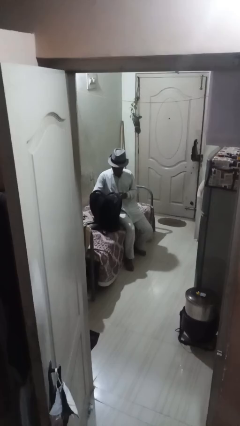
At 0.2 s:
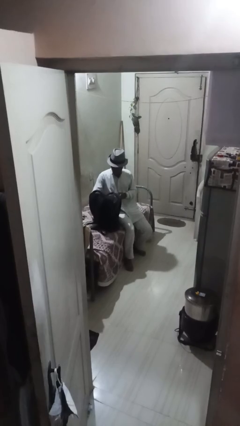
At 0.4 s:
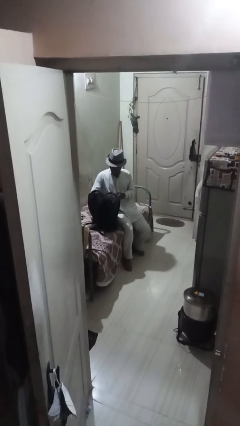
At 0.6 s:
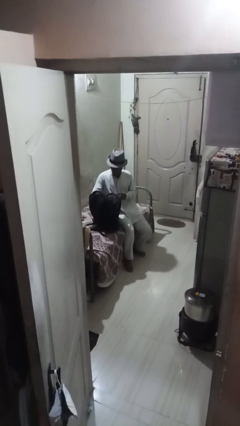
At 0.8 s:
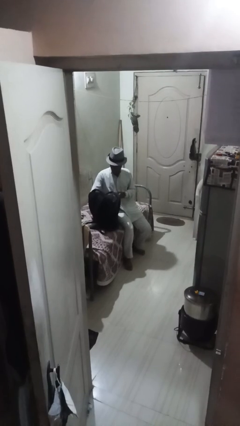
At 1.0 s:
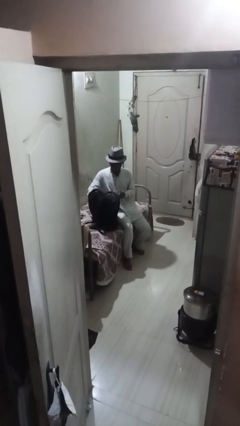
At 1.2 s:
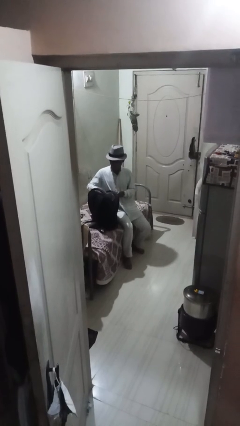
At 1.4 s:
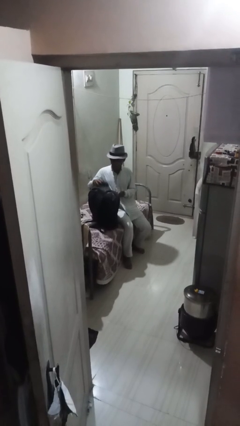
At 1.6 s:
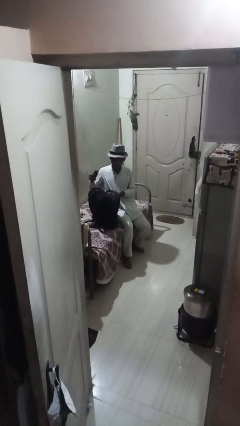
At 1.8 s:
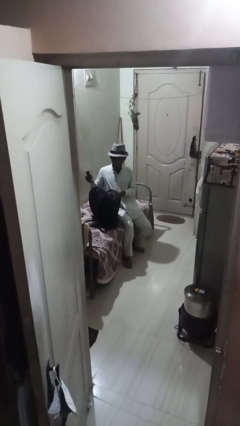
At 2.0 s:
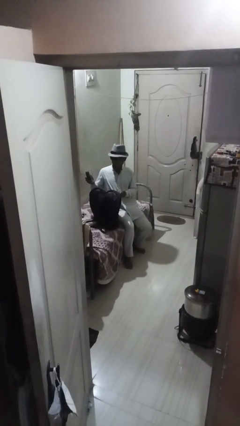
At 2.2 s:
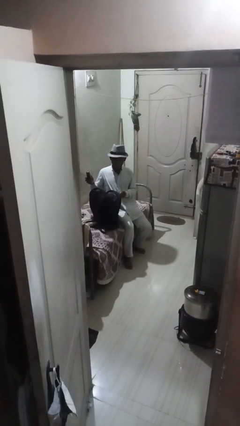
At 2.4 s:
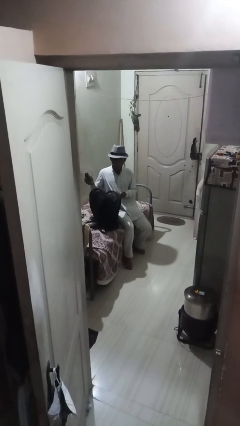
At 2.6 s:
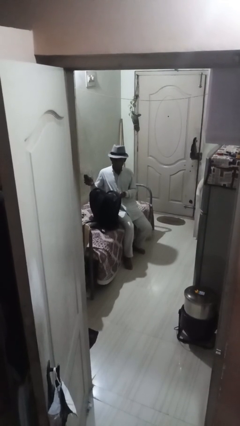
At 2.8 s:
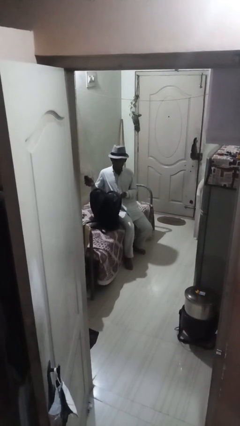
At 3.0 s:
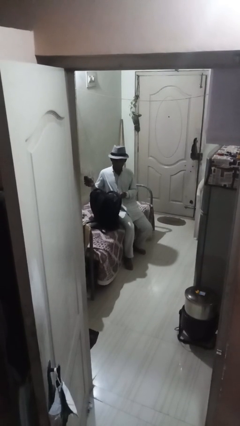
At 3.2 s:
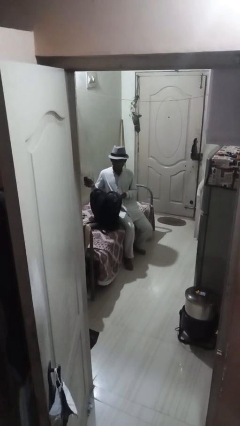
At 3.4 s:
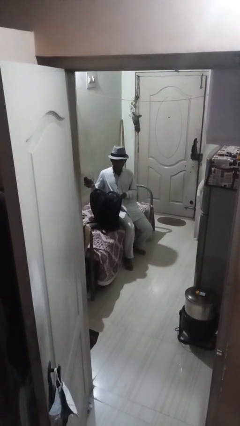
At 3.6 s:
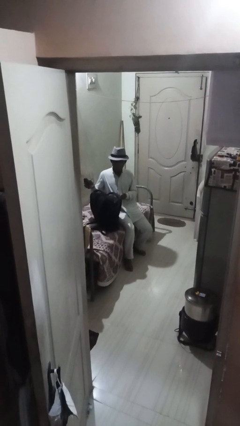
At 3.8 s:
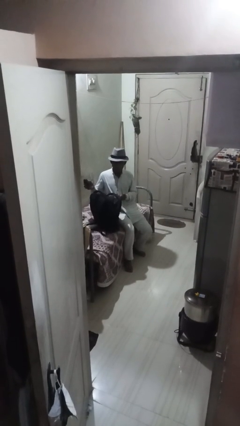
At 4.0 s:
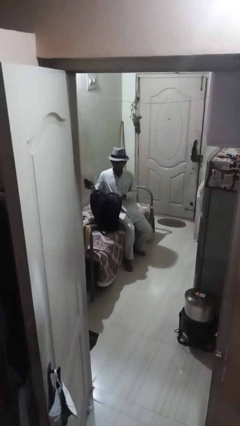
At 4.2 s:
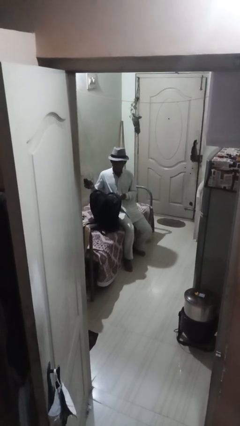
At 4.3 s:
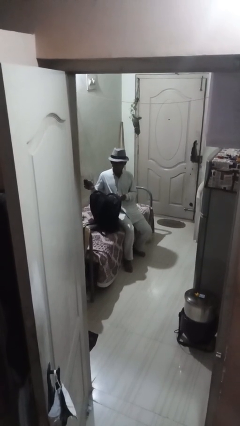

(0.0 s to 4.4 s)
person takes object from backpack

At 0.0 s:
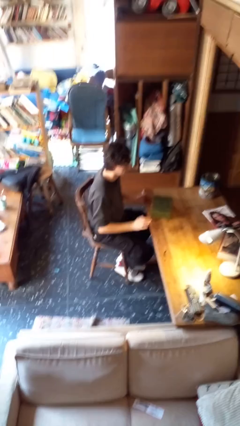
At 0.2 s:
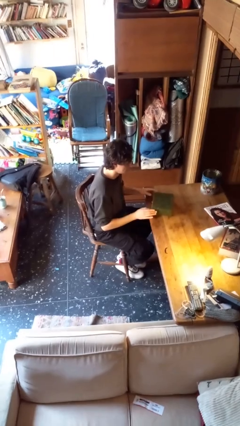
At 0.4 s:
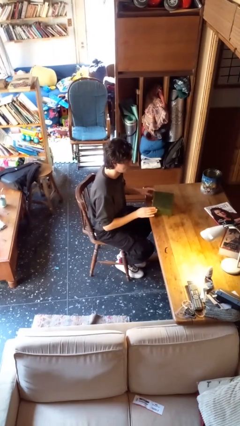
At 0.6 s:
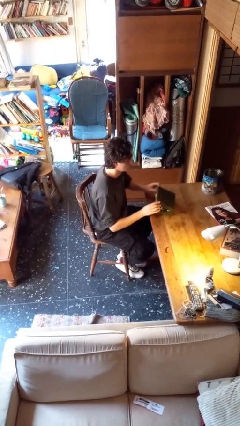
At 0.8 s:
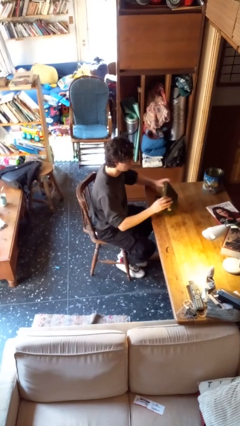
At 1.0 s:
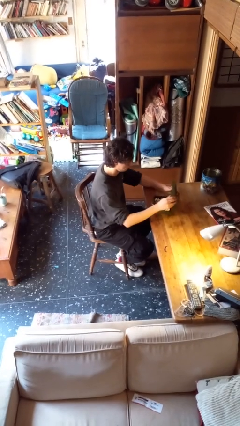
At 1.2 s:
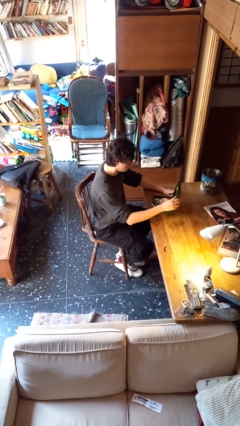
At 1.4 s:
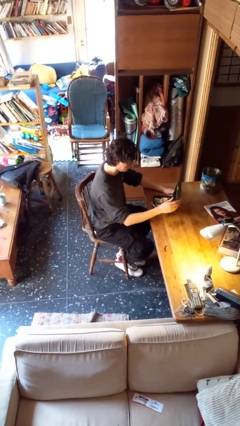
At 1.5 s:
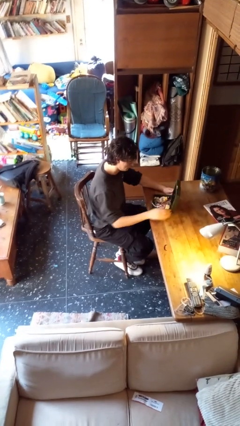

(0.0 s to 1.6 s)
person opens jewelry box

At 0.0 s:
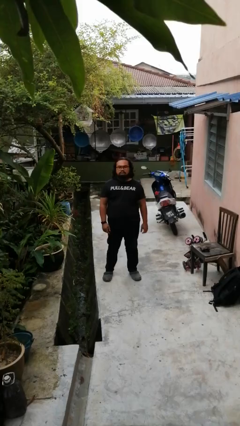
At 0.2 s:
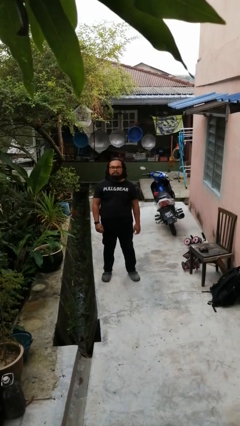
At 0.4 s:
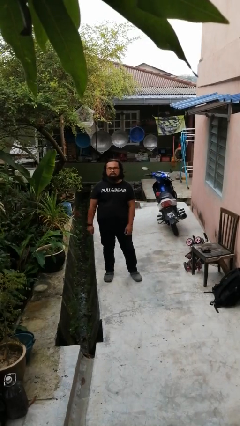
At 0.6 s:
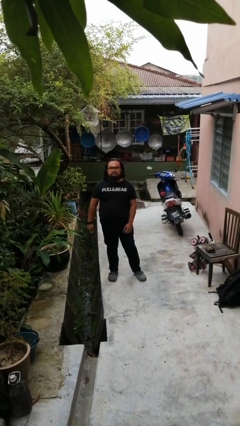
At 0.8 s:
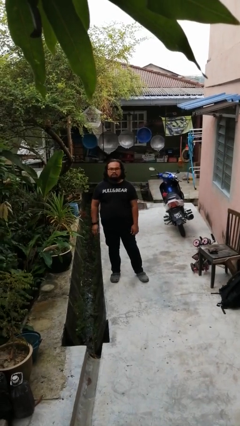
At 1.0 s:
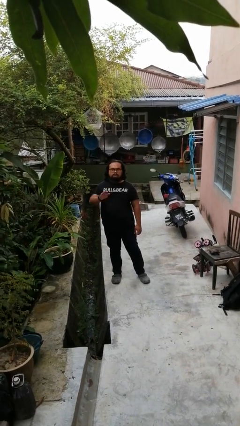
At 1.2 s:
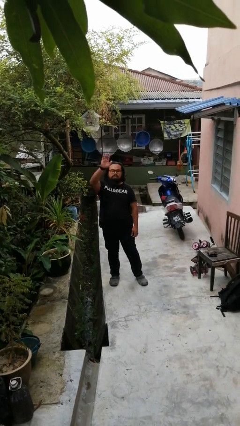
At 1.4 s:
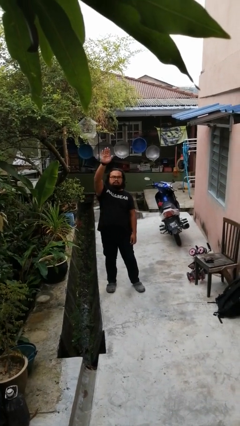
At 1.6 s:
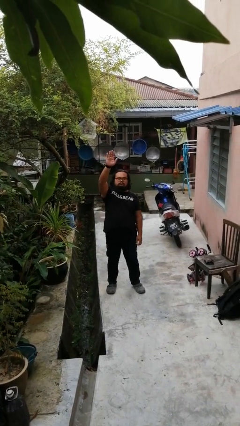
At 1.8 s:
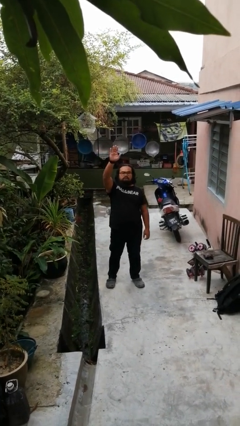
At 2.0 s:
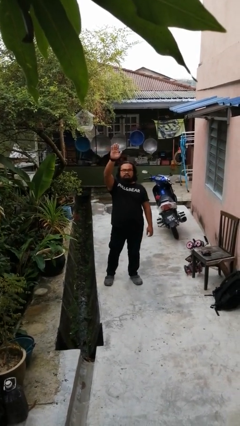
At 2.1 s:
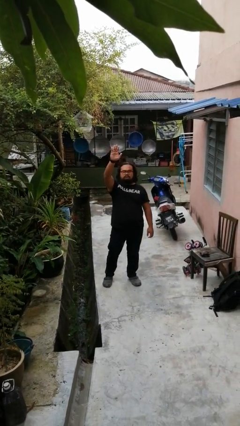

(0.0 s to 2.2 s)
person gestures raise hand

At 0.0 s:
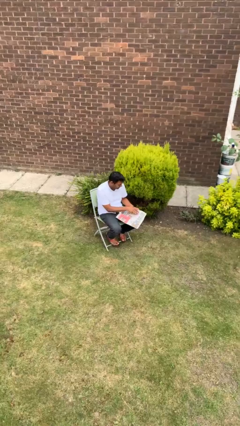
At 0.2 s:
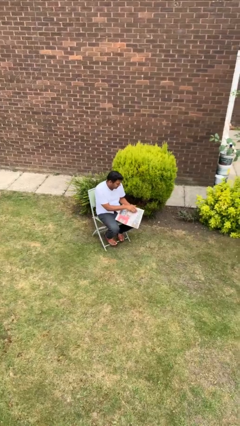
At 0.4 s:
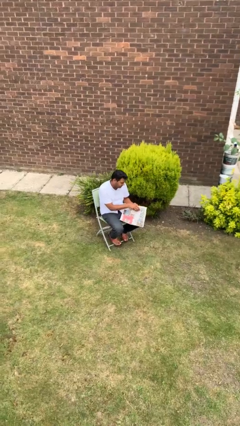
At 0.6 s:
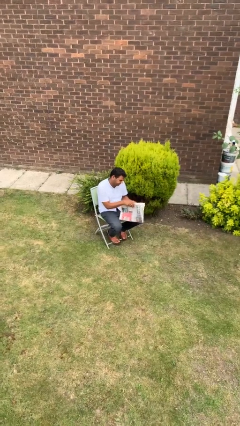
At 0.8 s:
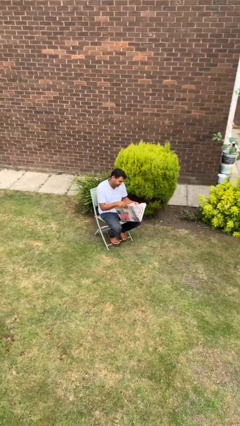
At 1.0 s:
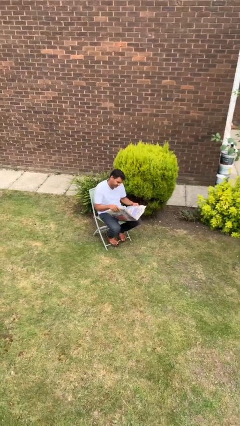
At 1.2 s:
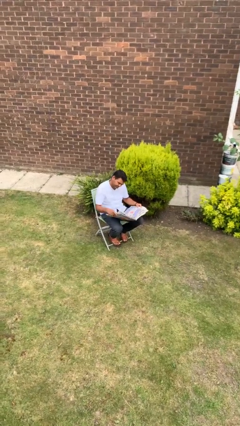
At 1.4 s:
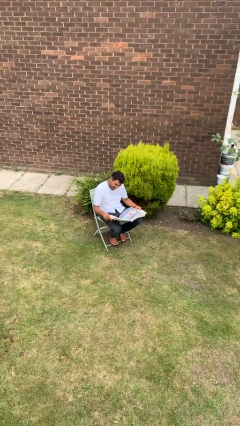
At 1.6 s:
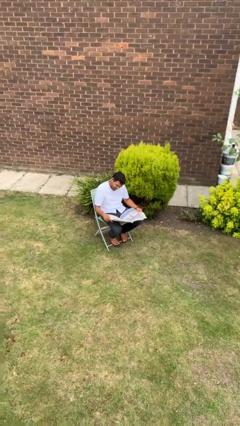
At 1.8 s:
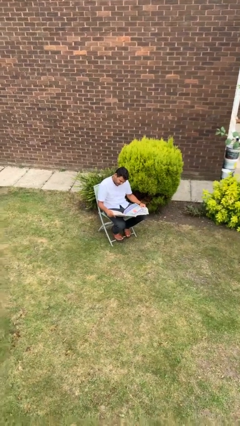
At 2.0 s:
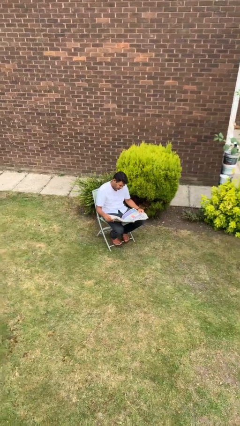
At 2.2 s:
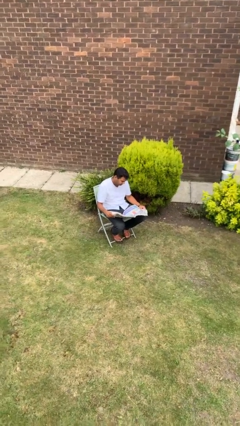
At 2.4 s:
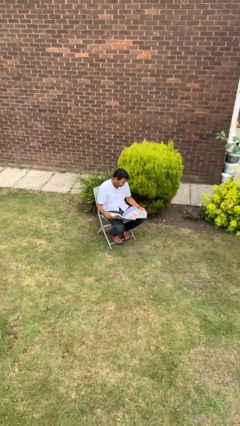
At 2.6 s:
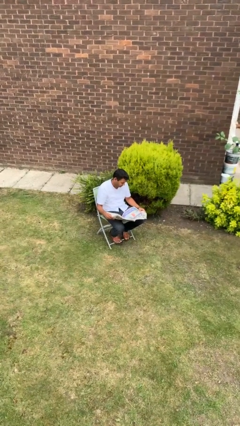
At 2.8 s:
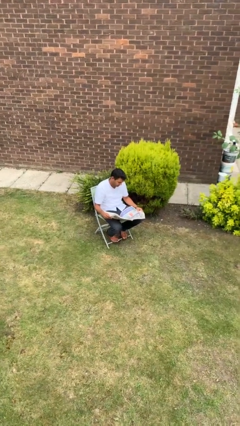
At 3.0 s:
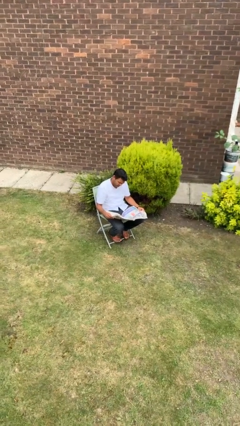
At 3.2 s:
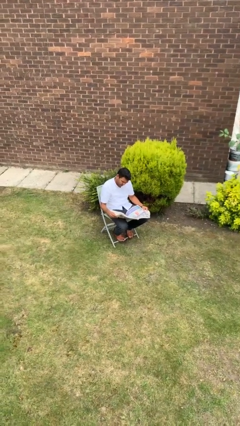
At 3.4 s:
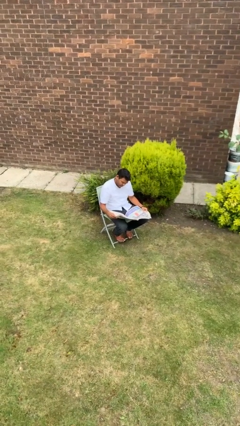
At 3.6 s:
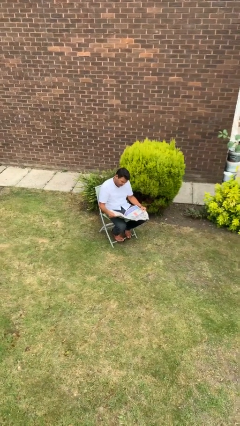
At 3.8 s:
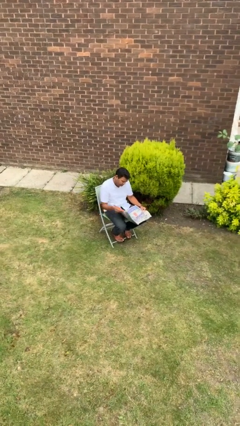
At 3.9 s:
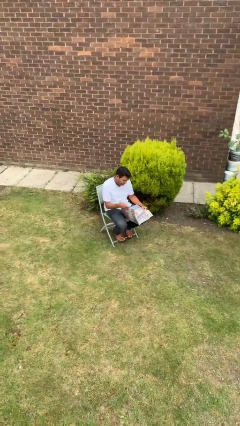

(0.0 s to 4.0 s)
person reads newspaper

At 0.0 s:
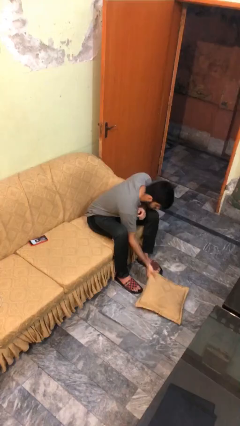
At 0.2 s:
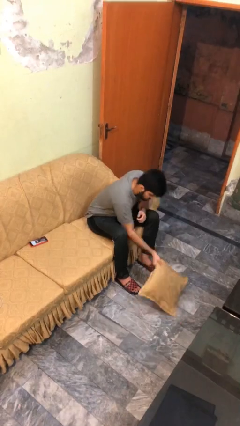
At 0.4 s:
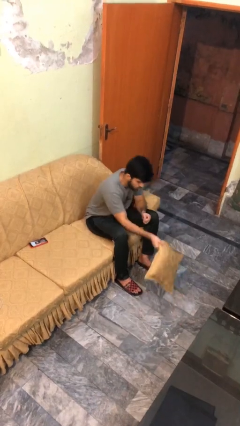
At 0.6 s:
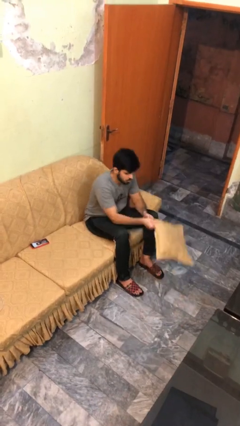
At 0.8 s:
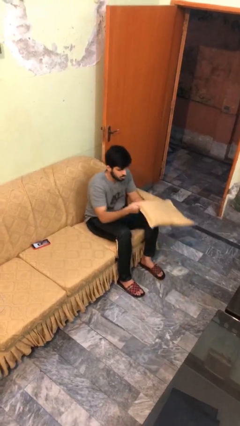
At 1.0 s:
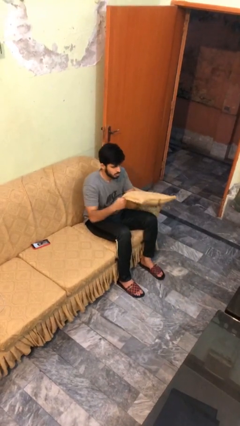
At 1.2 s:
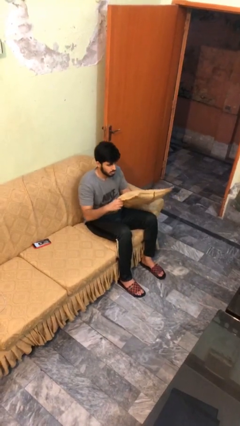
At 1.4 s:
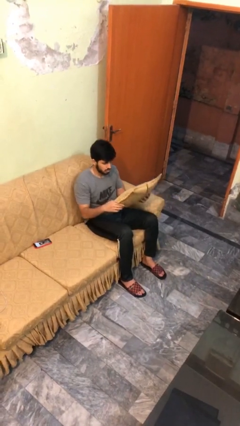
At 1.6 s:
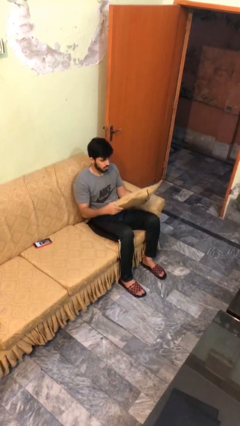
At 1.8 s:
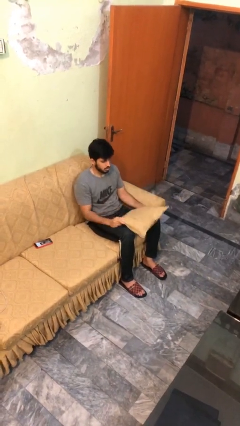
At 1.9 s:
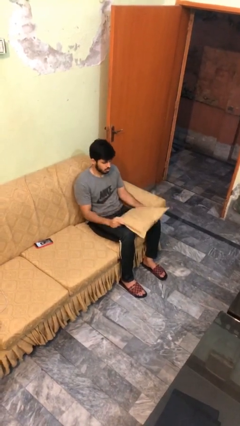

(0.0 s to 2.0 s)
person picks up object from floor

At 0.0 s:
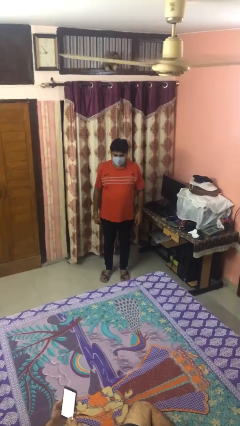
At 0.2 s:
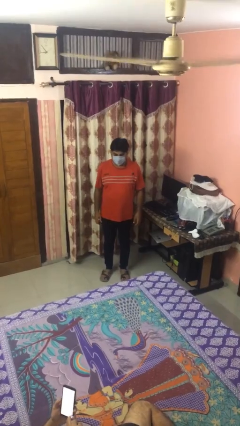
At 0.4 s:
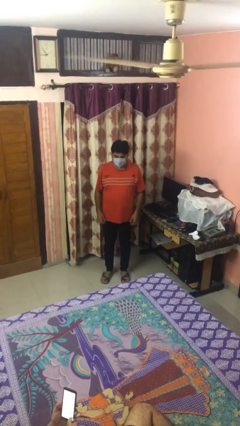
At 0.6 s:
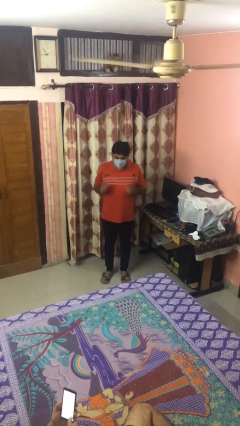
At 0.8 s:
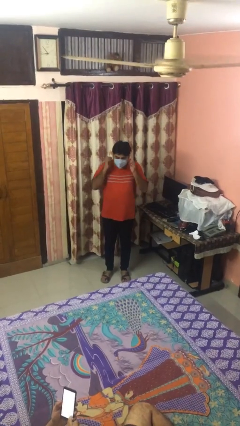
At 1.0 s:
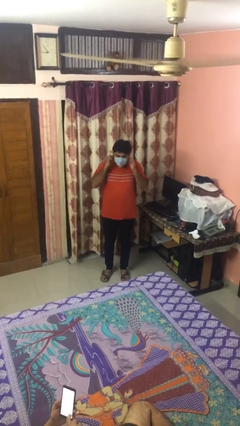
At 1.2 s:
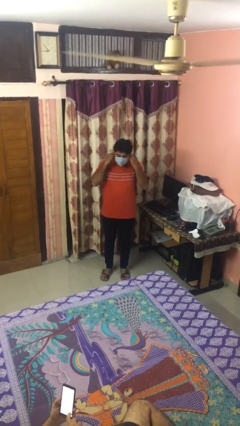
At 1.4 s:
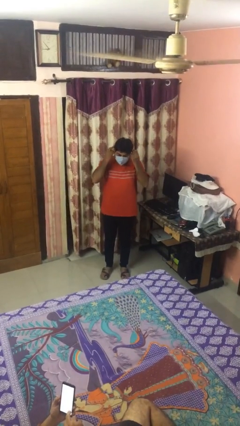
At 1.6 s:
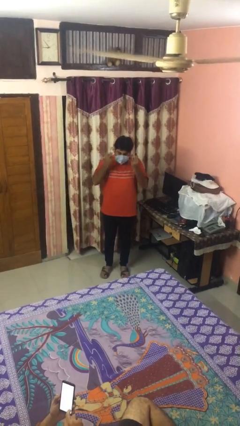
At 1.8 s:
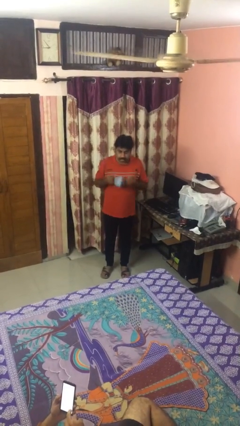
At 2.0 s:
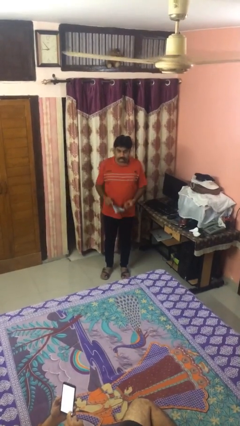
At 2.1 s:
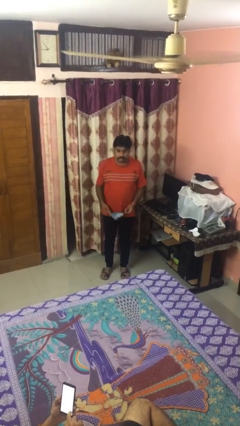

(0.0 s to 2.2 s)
person takes off facemask

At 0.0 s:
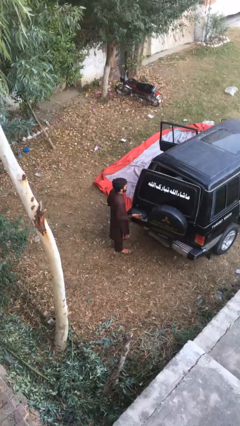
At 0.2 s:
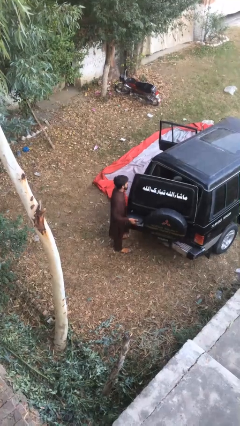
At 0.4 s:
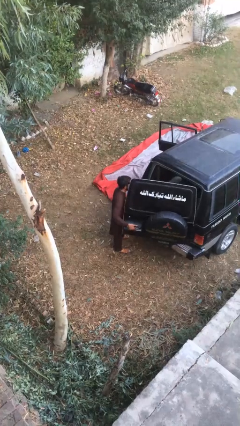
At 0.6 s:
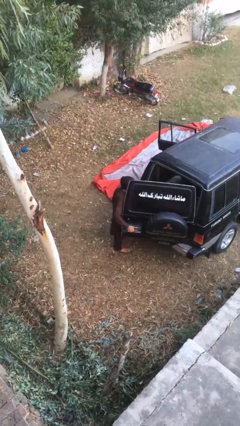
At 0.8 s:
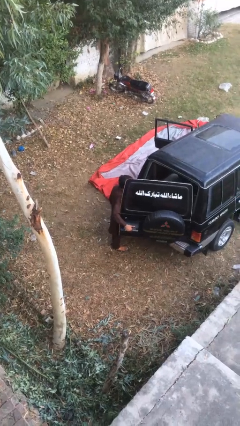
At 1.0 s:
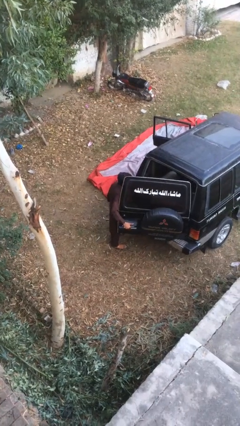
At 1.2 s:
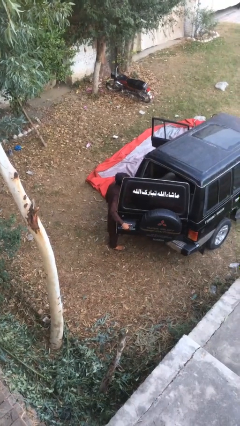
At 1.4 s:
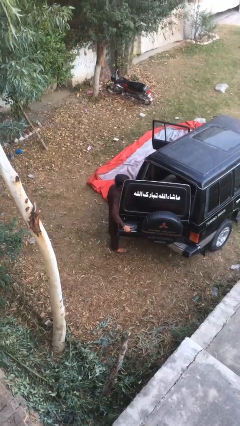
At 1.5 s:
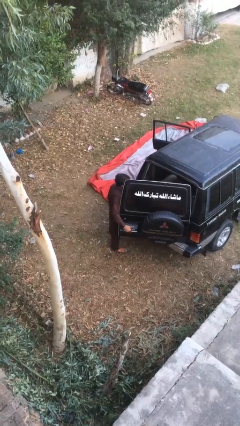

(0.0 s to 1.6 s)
person opens car trunk
